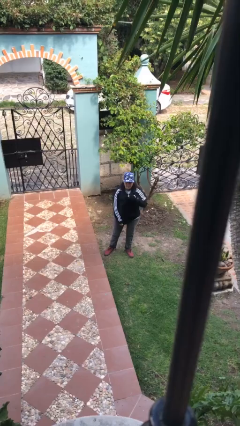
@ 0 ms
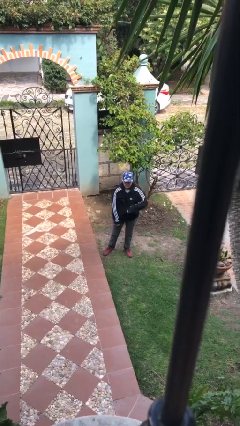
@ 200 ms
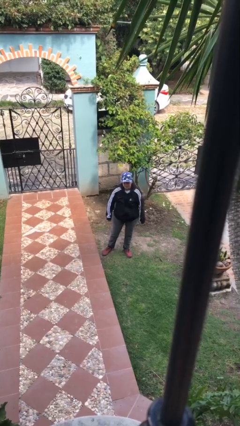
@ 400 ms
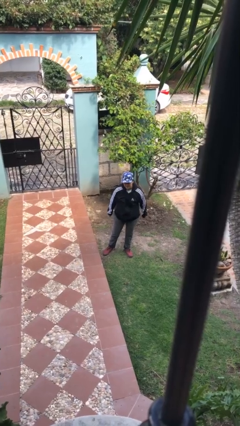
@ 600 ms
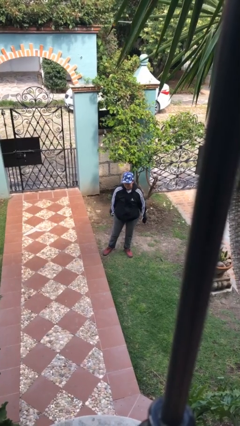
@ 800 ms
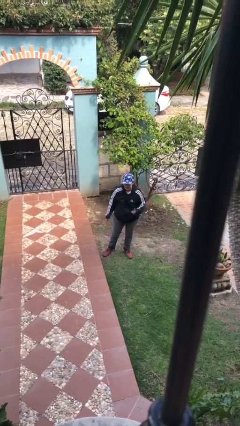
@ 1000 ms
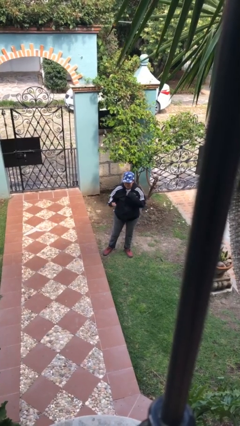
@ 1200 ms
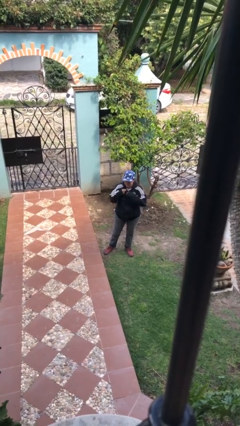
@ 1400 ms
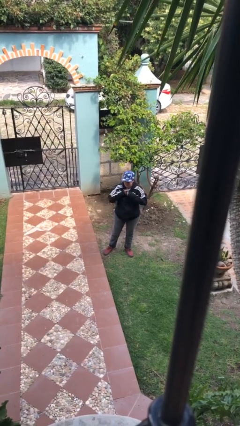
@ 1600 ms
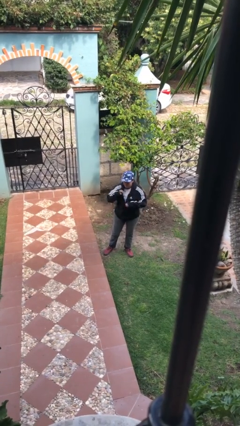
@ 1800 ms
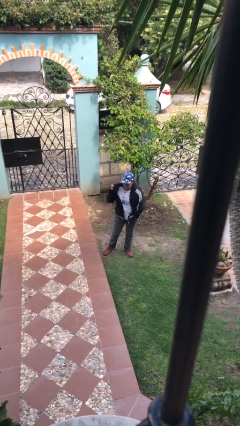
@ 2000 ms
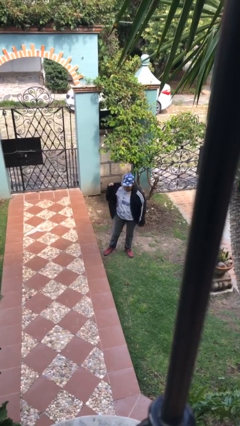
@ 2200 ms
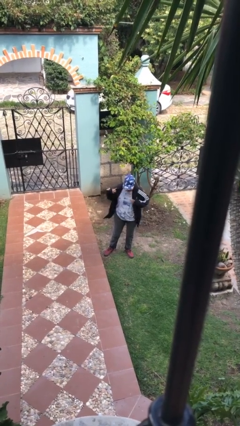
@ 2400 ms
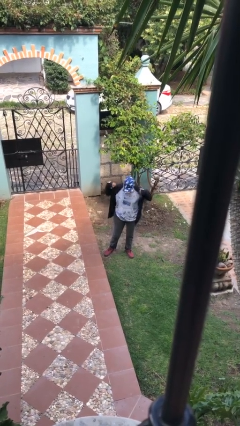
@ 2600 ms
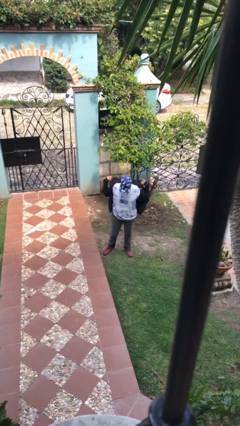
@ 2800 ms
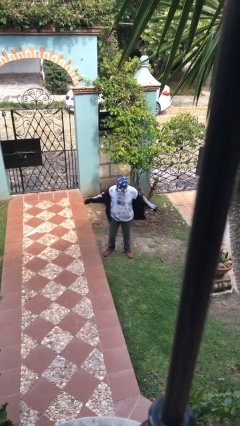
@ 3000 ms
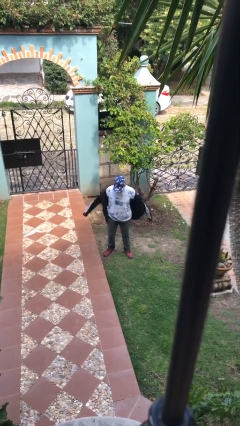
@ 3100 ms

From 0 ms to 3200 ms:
person unzips jacket

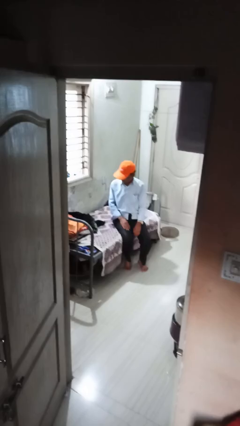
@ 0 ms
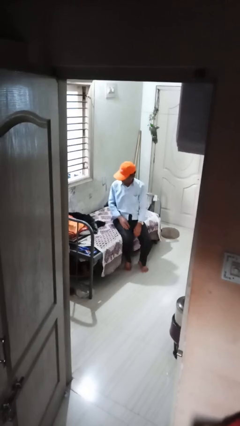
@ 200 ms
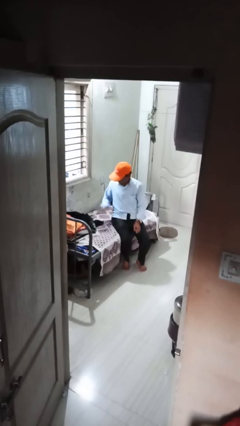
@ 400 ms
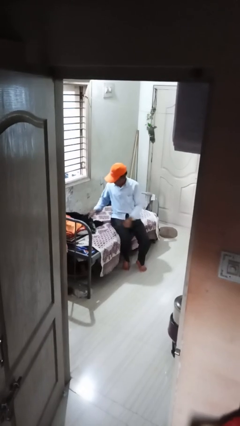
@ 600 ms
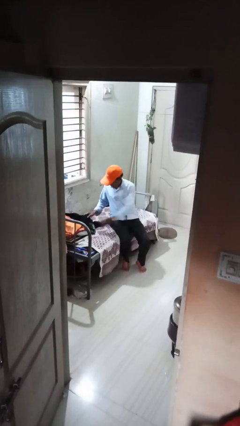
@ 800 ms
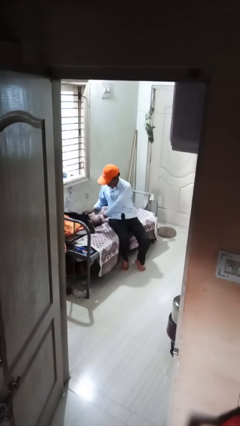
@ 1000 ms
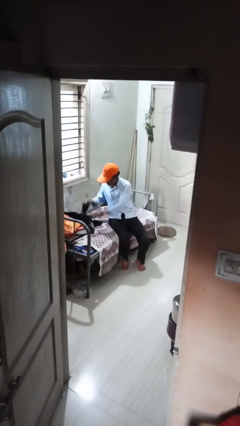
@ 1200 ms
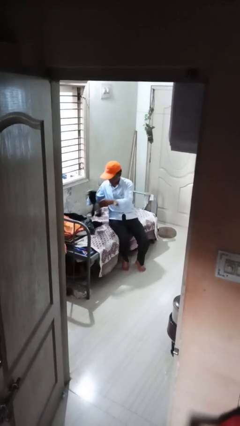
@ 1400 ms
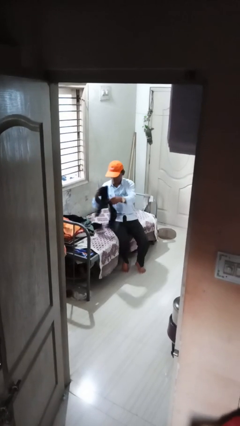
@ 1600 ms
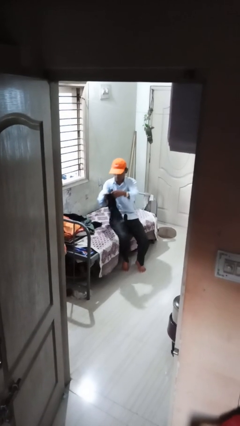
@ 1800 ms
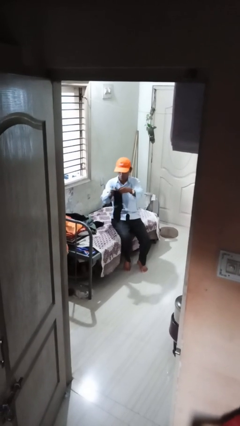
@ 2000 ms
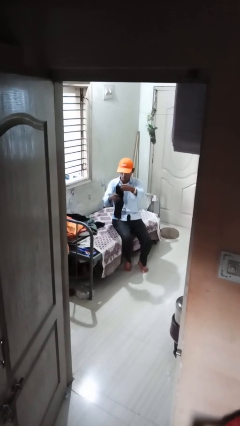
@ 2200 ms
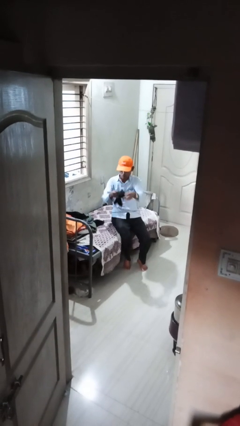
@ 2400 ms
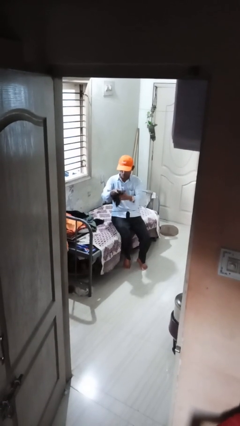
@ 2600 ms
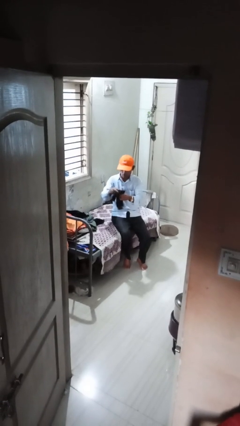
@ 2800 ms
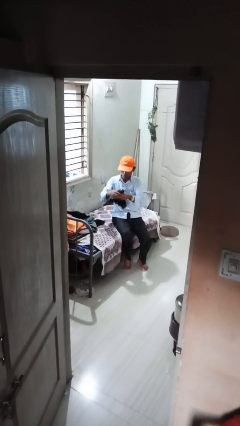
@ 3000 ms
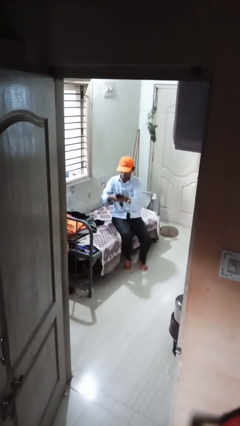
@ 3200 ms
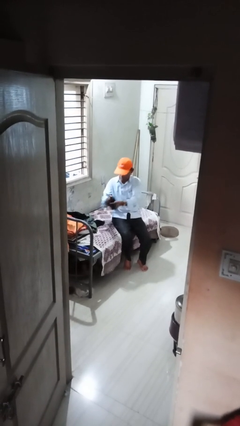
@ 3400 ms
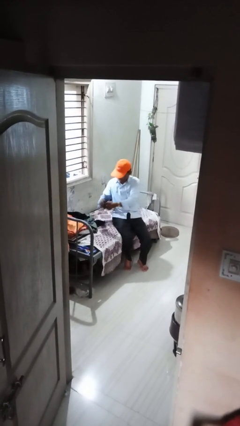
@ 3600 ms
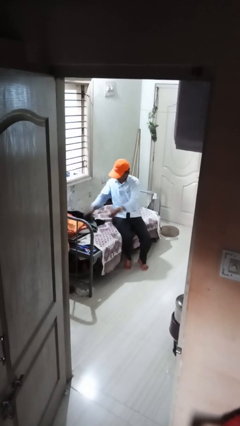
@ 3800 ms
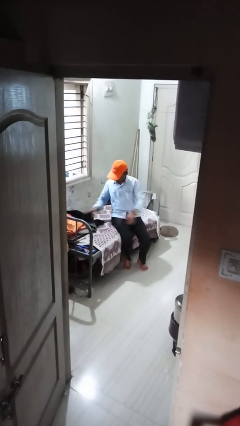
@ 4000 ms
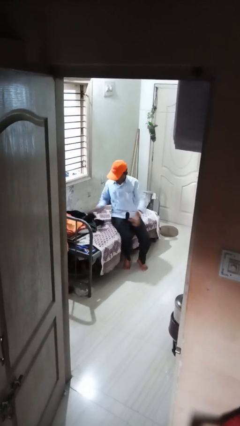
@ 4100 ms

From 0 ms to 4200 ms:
person folds socks

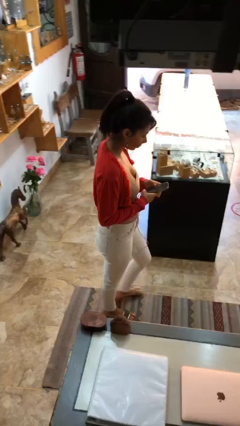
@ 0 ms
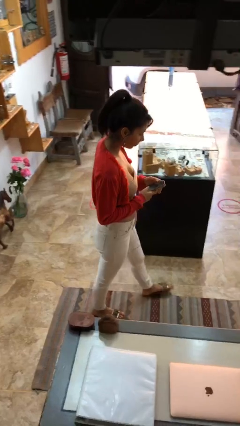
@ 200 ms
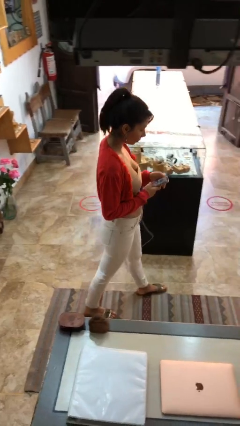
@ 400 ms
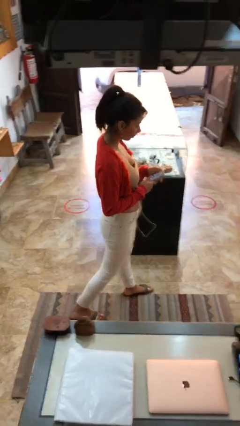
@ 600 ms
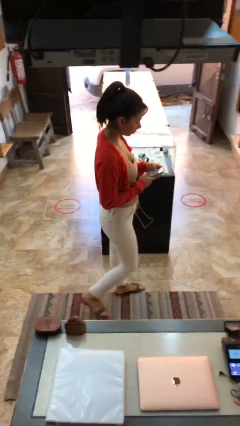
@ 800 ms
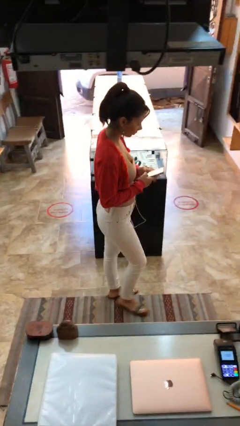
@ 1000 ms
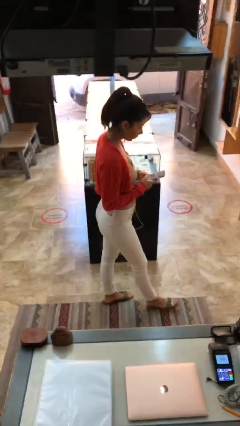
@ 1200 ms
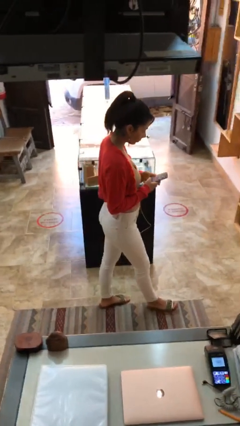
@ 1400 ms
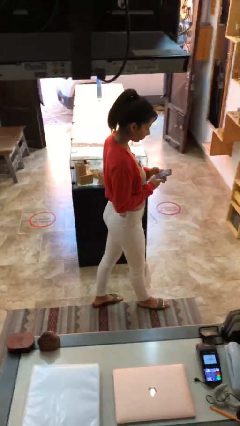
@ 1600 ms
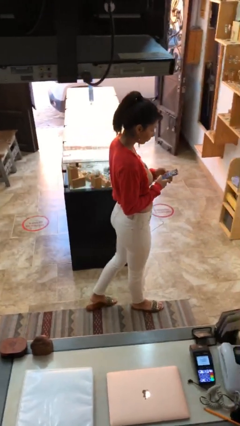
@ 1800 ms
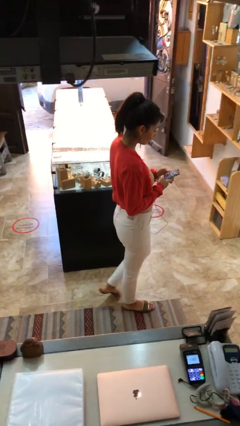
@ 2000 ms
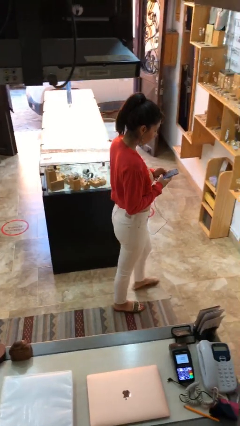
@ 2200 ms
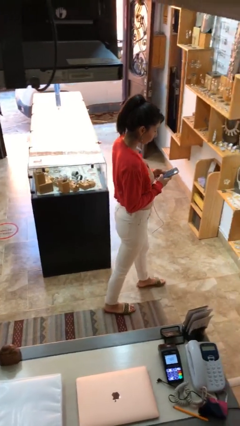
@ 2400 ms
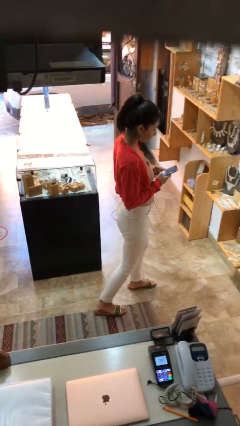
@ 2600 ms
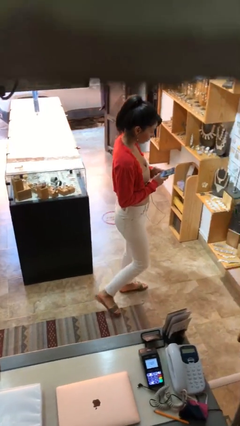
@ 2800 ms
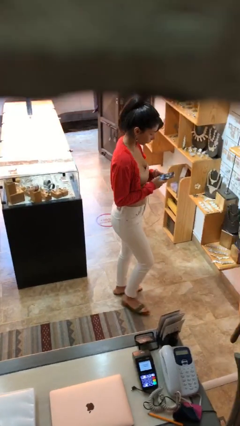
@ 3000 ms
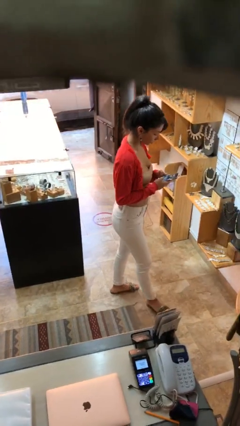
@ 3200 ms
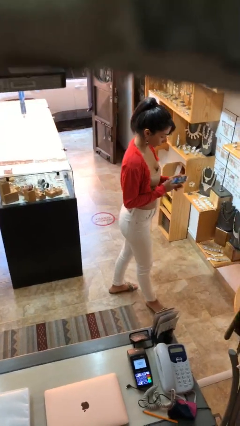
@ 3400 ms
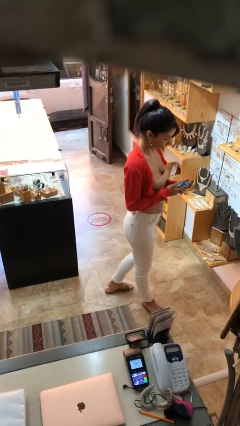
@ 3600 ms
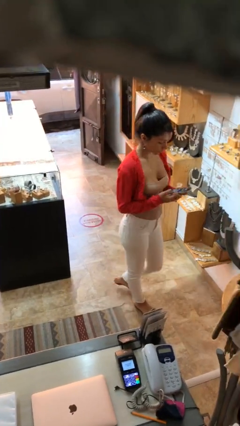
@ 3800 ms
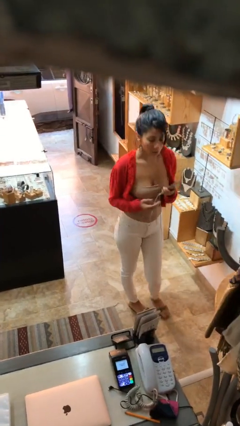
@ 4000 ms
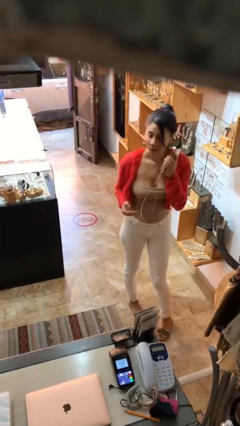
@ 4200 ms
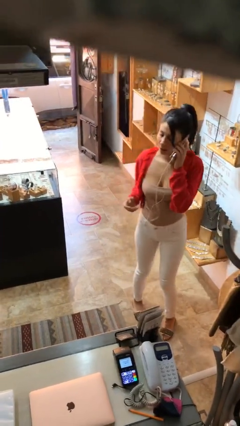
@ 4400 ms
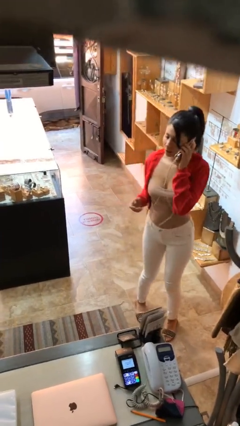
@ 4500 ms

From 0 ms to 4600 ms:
person texts on phone

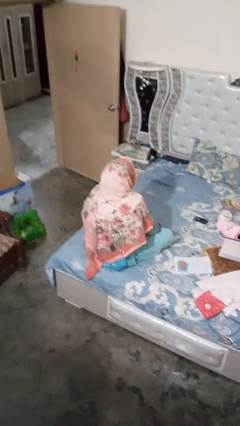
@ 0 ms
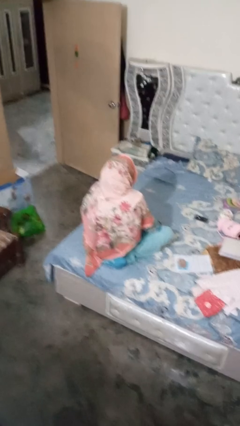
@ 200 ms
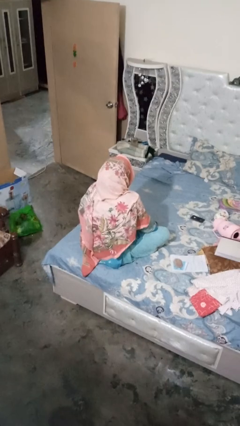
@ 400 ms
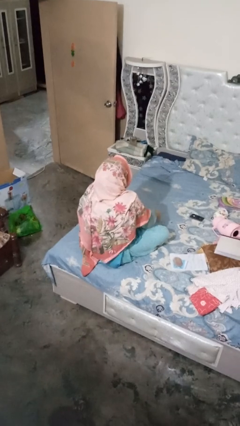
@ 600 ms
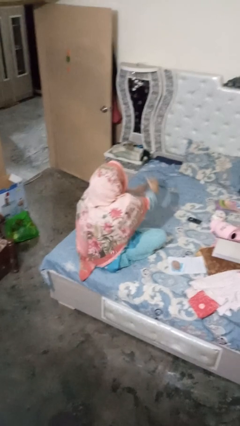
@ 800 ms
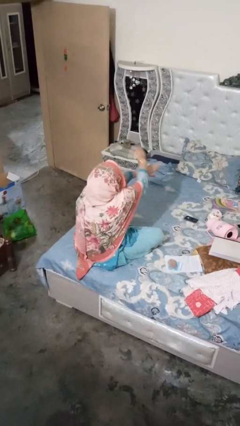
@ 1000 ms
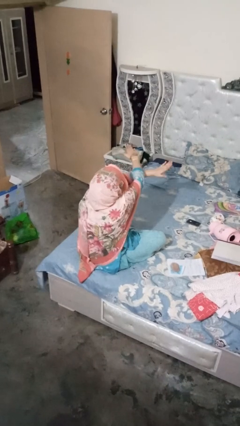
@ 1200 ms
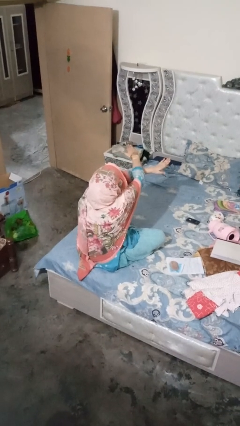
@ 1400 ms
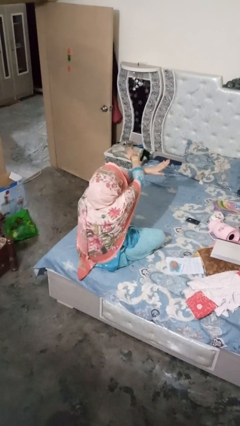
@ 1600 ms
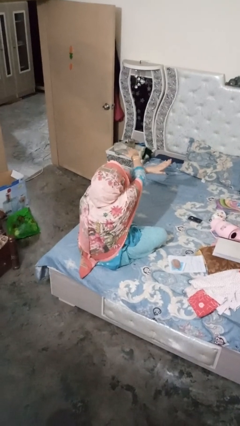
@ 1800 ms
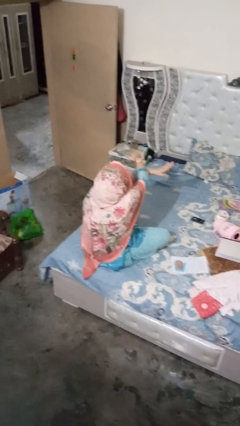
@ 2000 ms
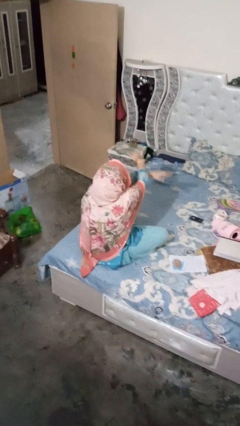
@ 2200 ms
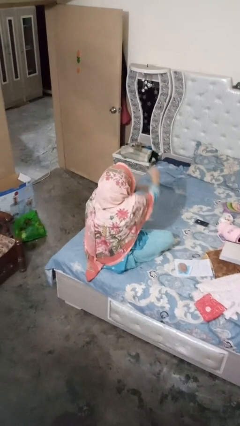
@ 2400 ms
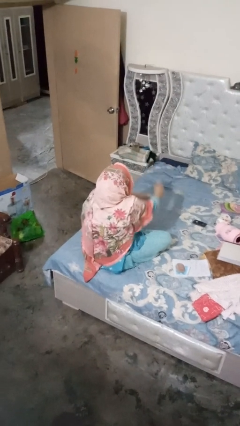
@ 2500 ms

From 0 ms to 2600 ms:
person gestures arms x

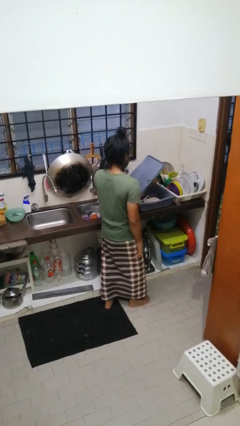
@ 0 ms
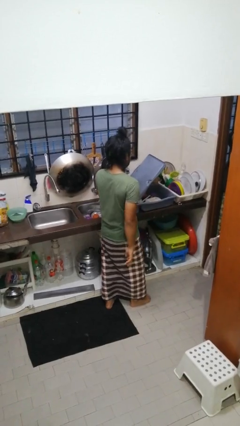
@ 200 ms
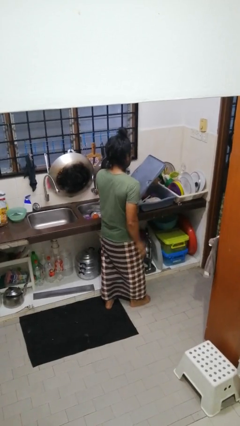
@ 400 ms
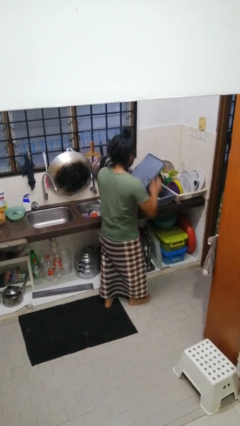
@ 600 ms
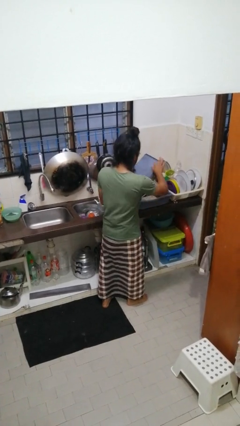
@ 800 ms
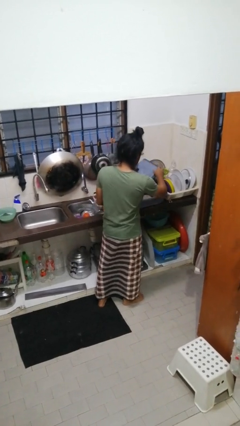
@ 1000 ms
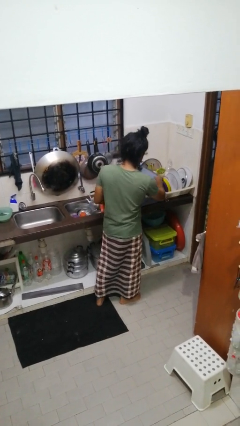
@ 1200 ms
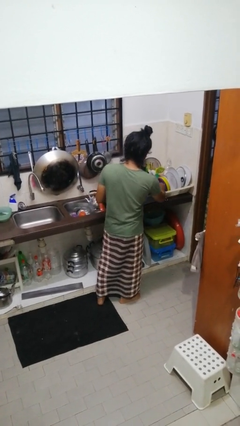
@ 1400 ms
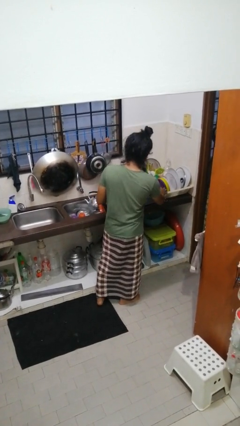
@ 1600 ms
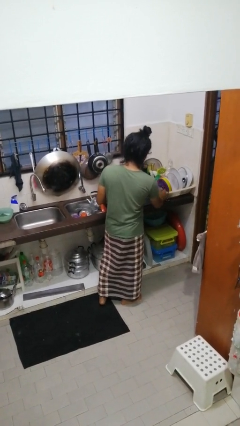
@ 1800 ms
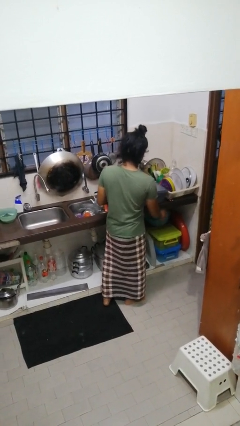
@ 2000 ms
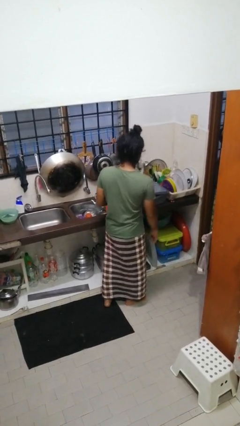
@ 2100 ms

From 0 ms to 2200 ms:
person closes dishwasher

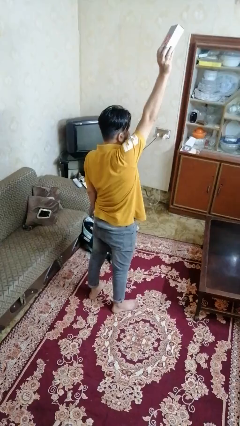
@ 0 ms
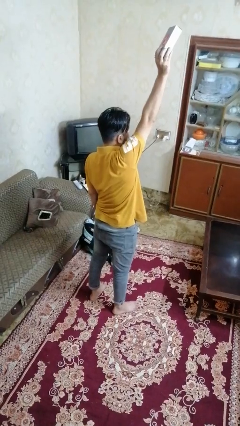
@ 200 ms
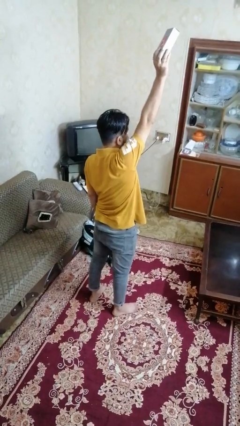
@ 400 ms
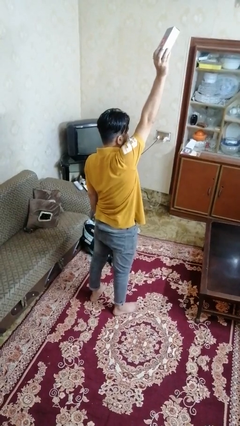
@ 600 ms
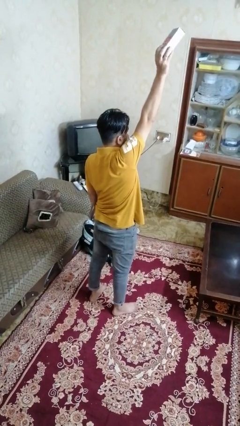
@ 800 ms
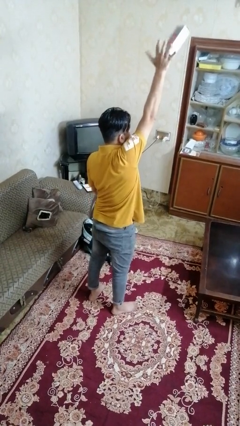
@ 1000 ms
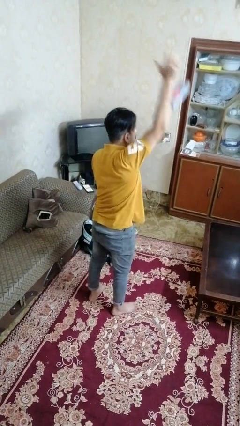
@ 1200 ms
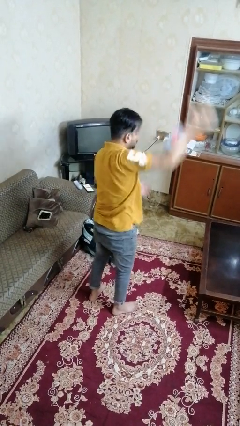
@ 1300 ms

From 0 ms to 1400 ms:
person drops object
